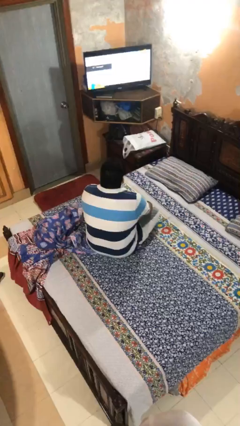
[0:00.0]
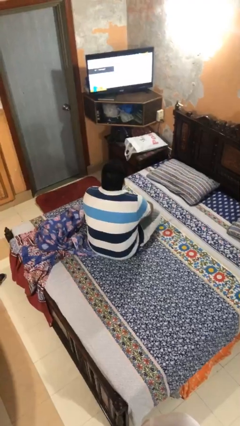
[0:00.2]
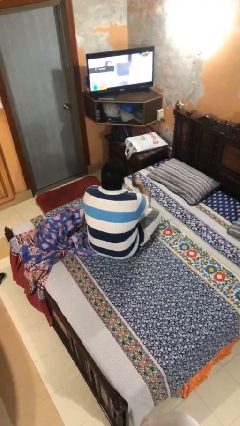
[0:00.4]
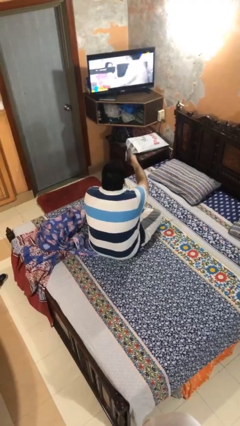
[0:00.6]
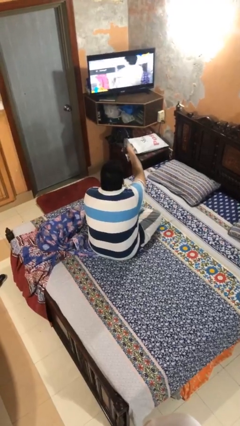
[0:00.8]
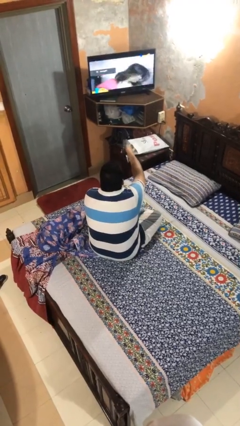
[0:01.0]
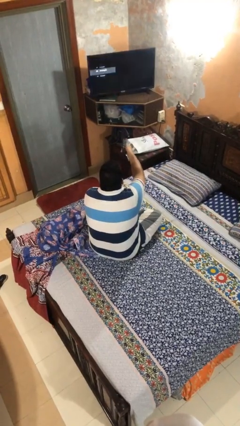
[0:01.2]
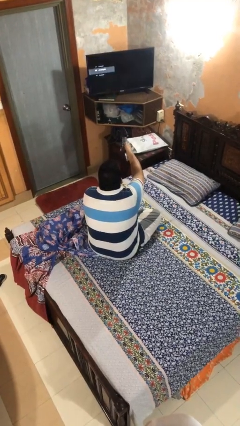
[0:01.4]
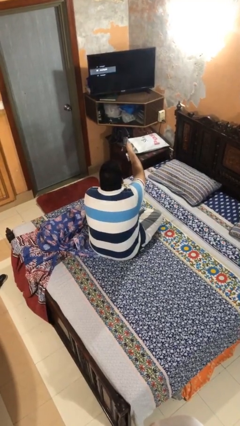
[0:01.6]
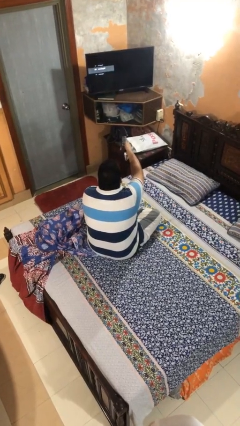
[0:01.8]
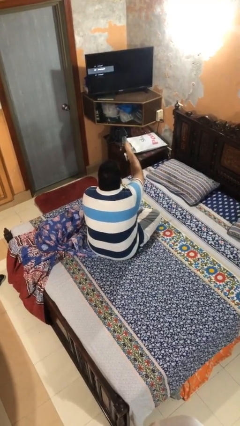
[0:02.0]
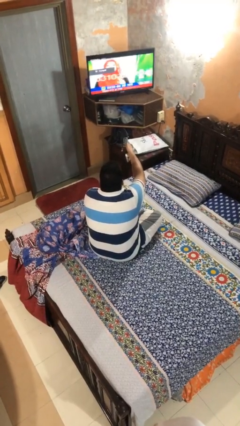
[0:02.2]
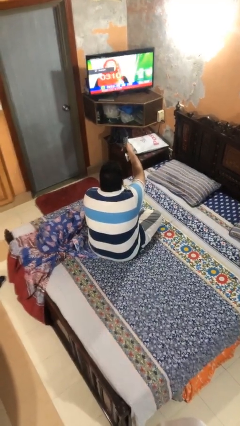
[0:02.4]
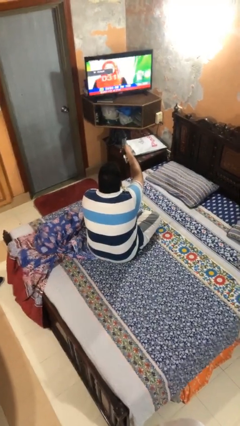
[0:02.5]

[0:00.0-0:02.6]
person uses television remote

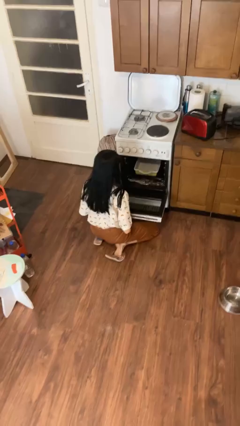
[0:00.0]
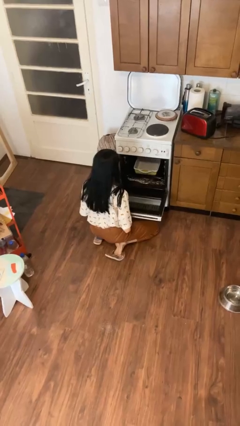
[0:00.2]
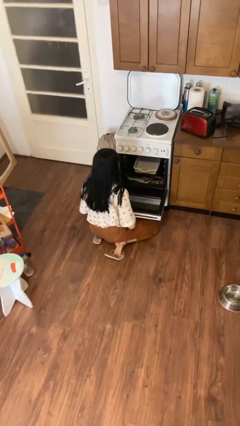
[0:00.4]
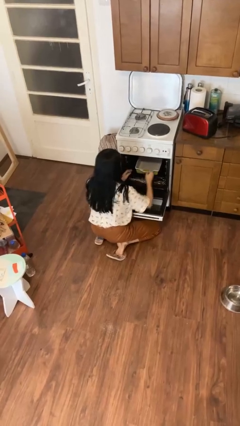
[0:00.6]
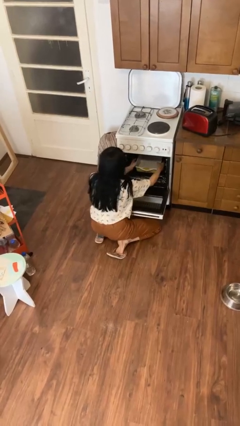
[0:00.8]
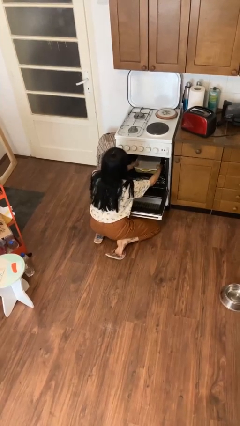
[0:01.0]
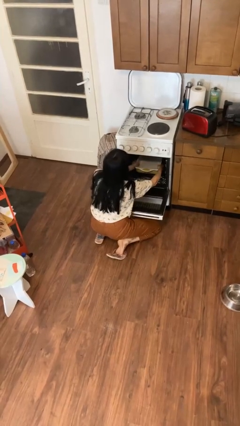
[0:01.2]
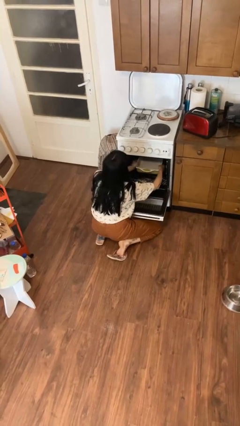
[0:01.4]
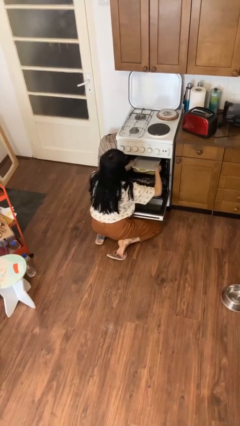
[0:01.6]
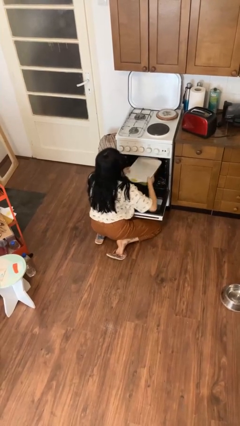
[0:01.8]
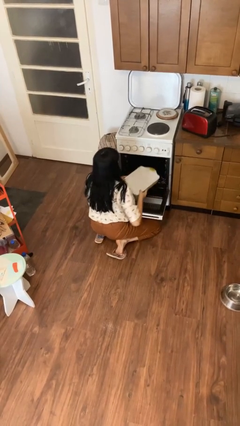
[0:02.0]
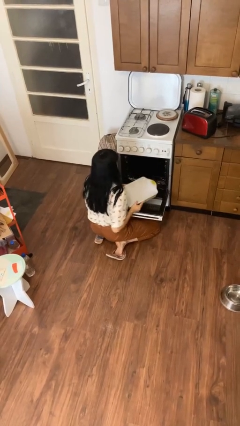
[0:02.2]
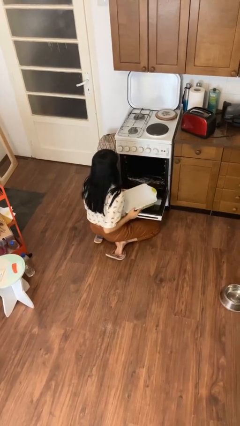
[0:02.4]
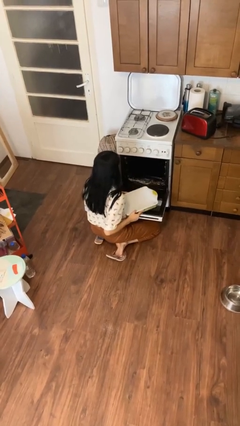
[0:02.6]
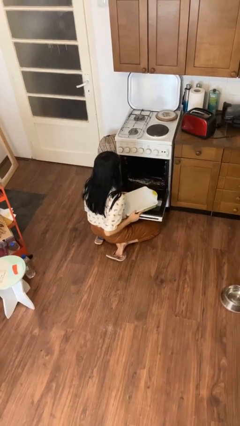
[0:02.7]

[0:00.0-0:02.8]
person takes object from oven

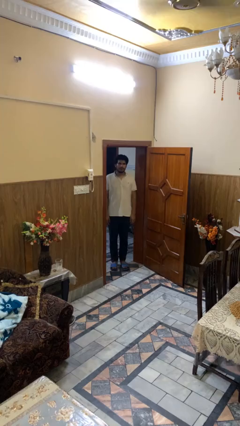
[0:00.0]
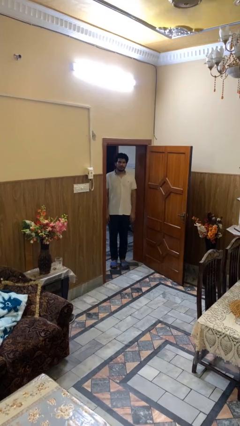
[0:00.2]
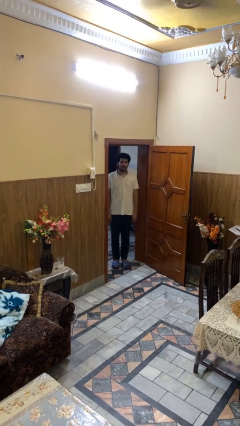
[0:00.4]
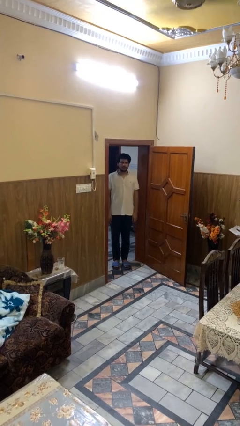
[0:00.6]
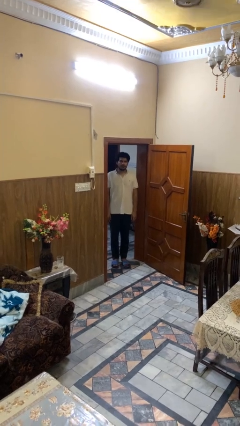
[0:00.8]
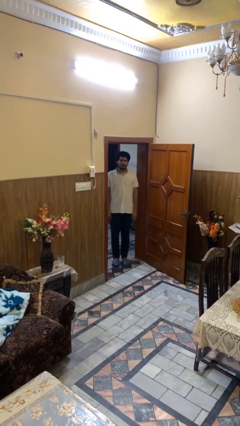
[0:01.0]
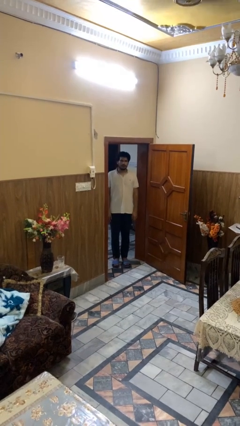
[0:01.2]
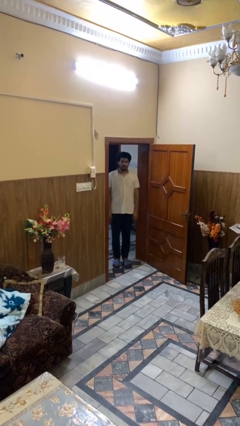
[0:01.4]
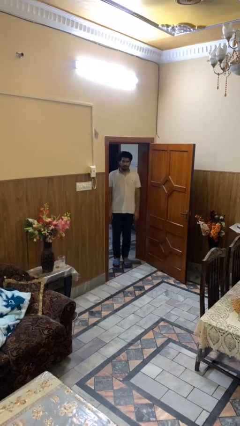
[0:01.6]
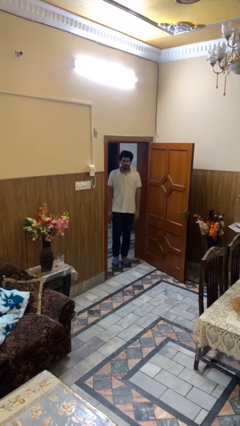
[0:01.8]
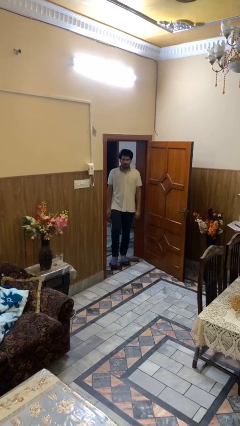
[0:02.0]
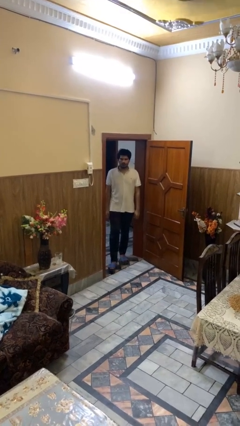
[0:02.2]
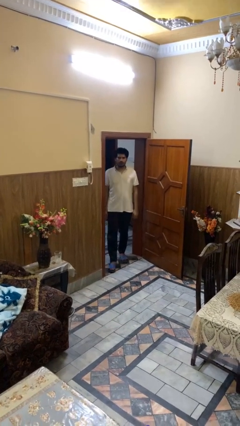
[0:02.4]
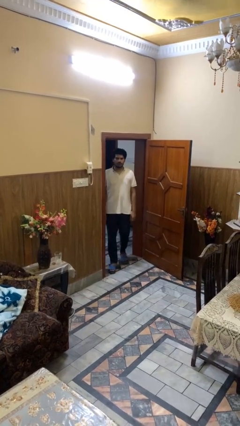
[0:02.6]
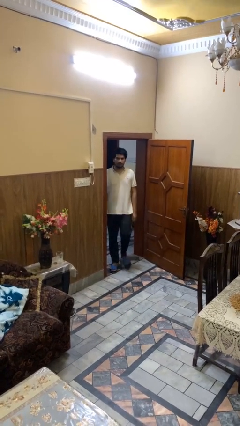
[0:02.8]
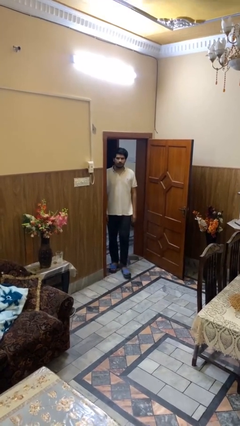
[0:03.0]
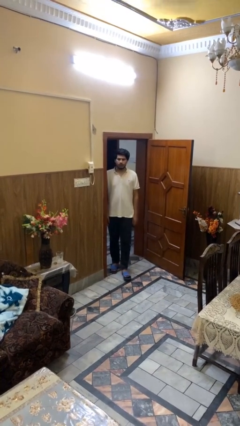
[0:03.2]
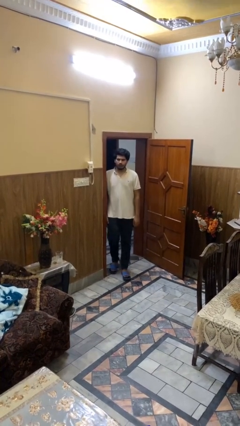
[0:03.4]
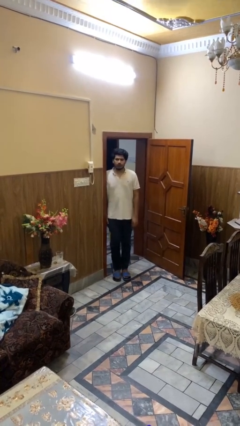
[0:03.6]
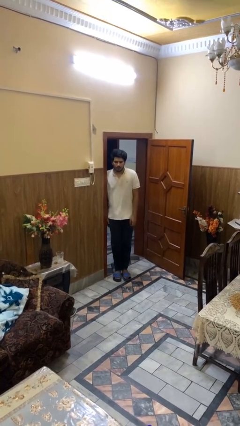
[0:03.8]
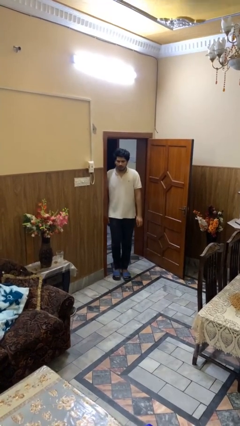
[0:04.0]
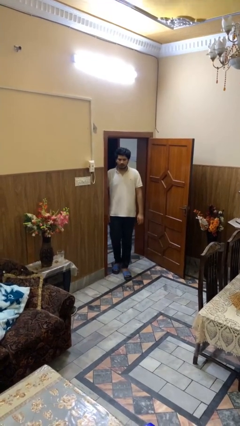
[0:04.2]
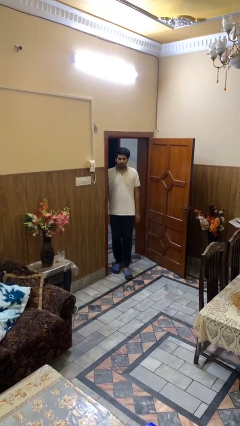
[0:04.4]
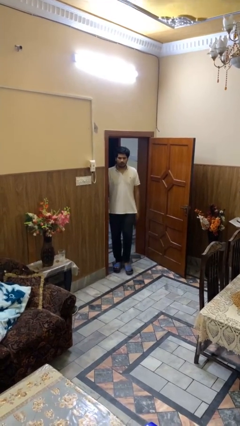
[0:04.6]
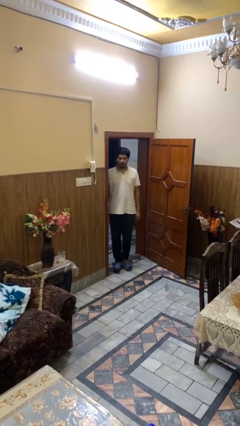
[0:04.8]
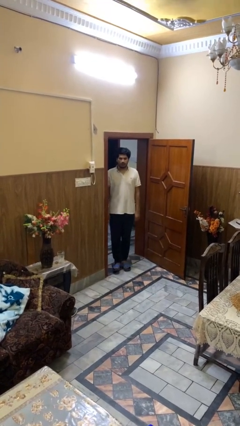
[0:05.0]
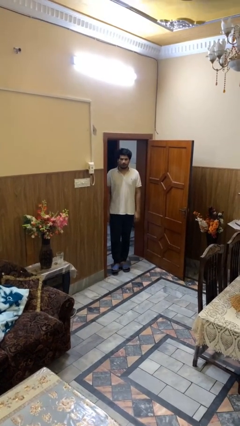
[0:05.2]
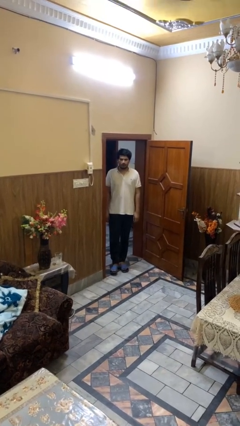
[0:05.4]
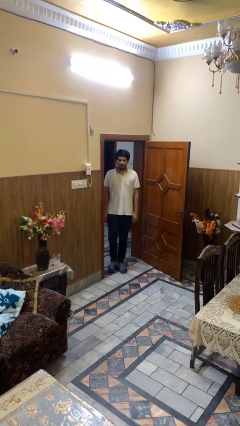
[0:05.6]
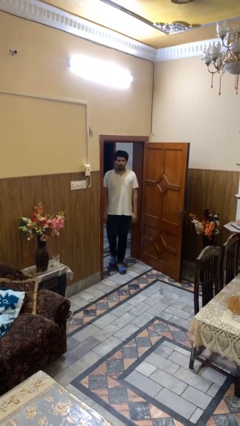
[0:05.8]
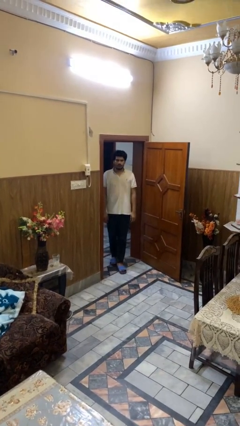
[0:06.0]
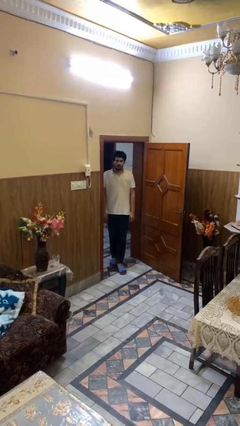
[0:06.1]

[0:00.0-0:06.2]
person bumps into wall

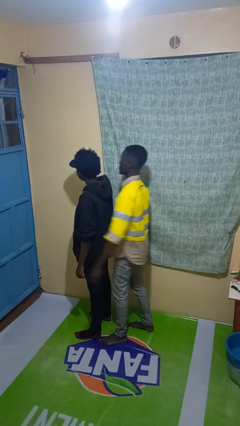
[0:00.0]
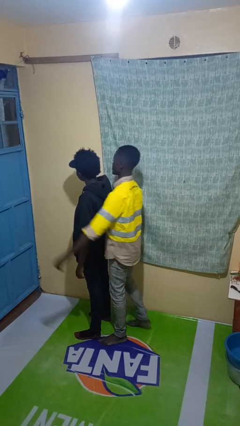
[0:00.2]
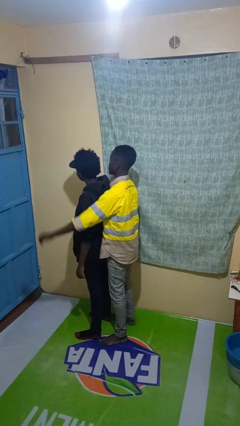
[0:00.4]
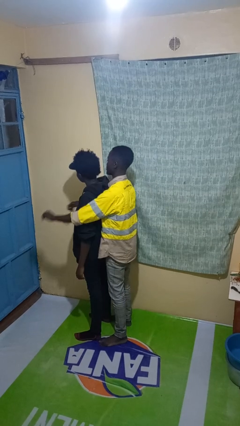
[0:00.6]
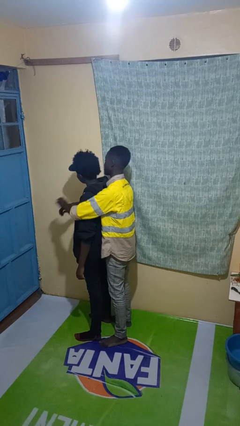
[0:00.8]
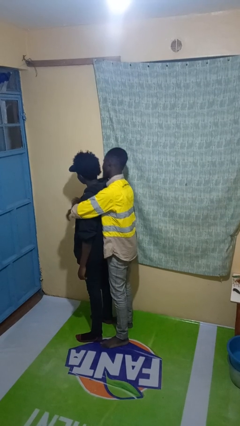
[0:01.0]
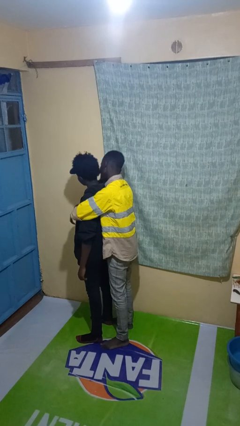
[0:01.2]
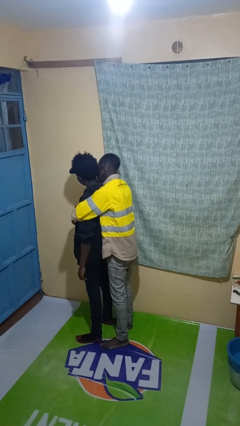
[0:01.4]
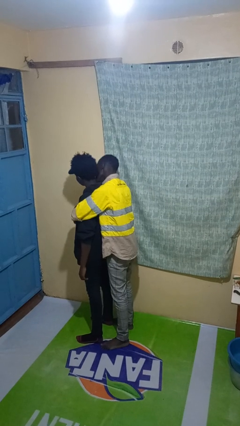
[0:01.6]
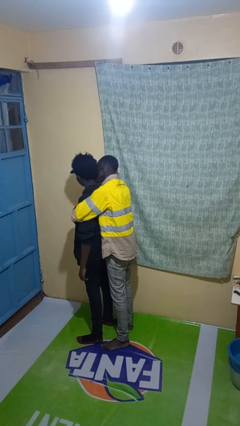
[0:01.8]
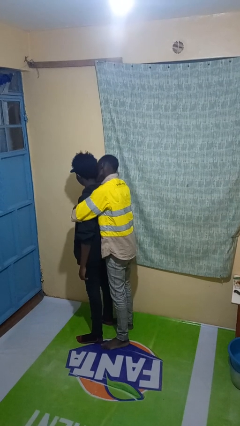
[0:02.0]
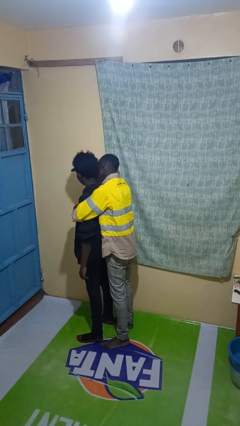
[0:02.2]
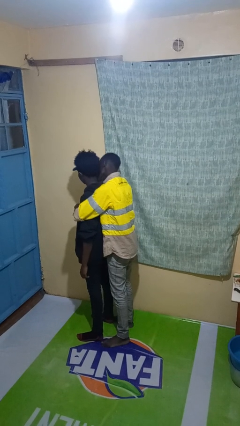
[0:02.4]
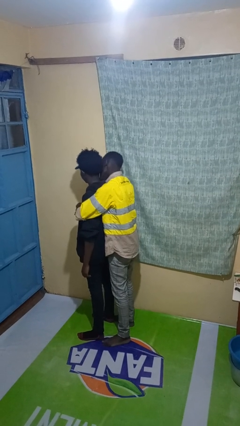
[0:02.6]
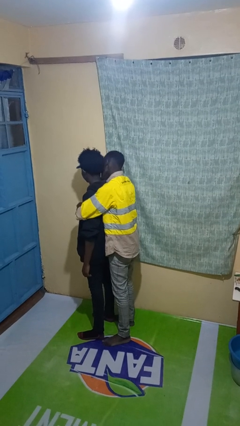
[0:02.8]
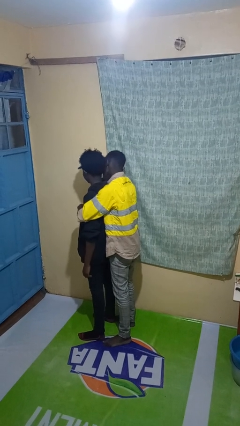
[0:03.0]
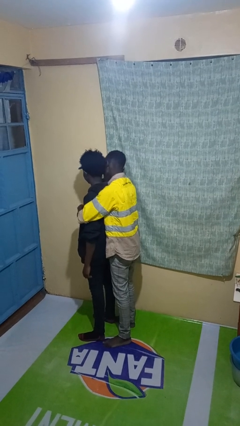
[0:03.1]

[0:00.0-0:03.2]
person hugs person from behind

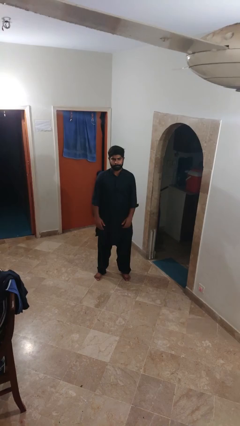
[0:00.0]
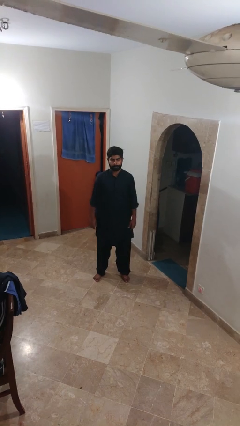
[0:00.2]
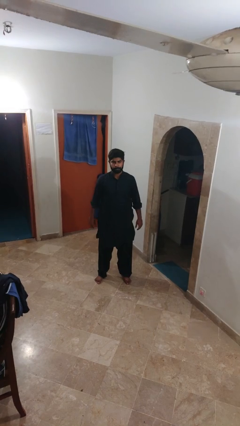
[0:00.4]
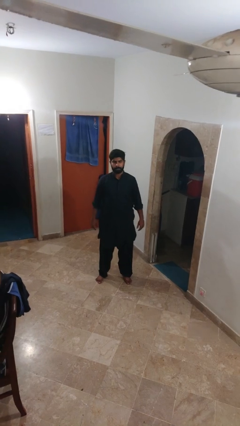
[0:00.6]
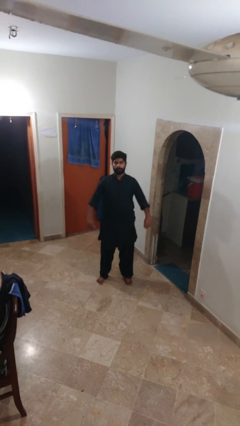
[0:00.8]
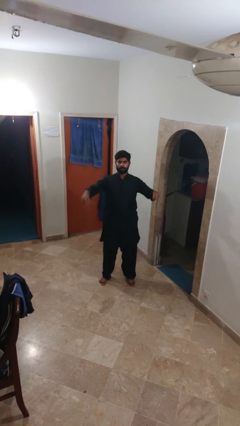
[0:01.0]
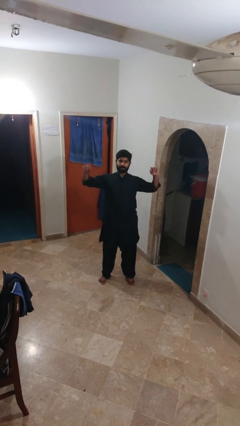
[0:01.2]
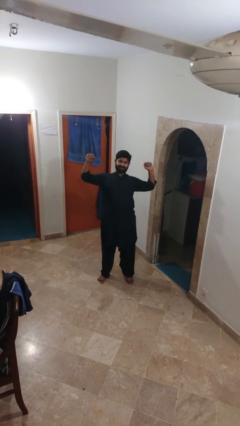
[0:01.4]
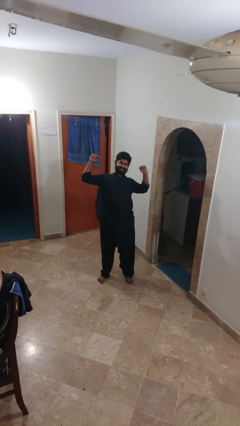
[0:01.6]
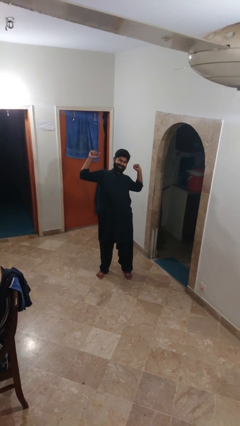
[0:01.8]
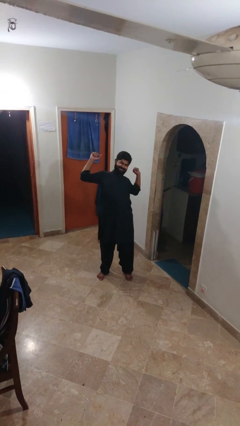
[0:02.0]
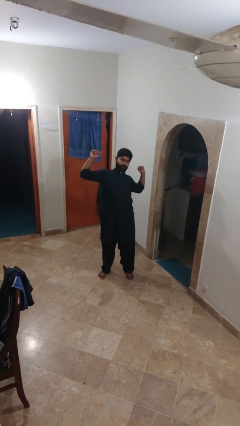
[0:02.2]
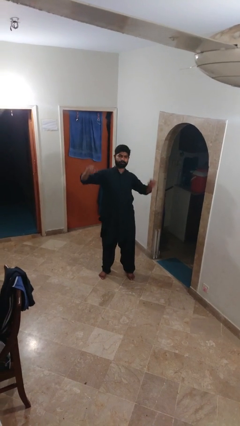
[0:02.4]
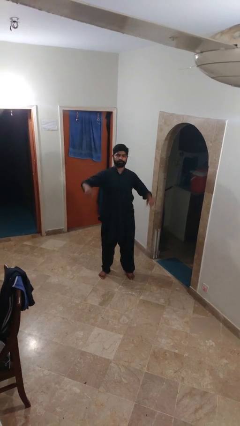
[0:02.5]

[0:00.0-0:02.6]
person stretches arms to side
